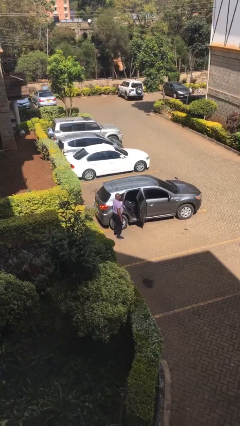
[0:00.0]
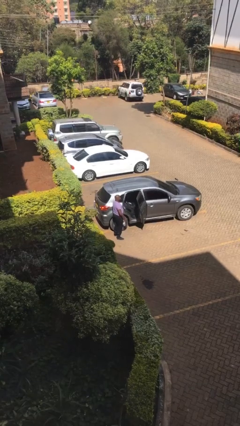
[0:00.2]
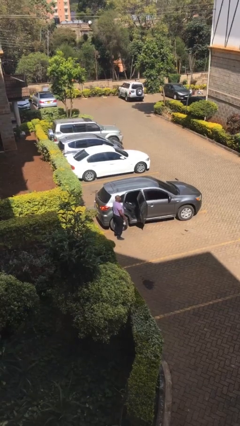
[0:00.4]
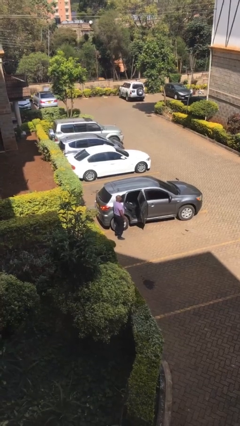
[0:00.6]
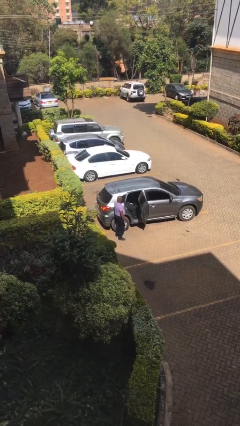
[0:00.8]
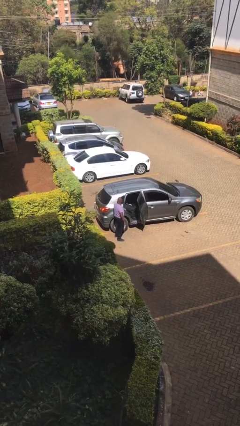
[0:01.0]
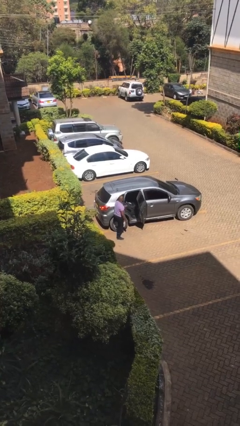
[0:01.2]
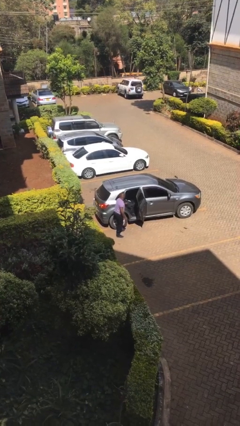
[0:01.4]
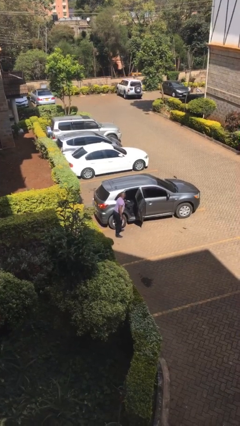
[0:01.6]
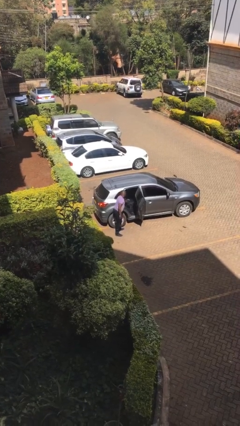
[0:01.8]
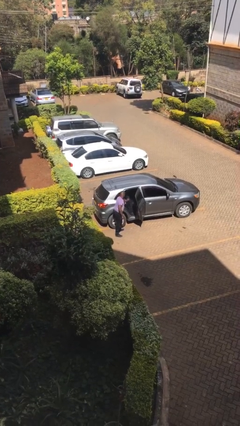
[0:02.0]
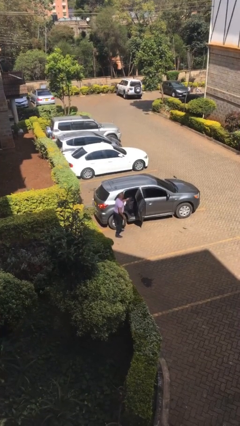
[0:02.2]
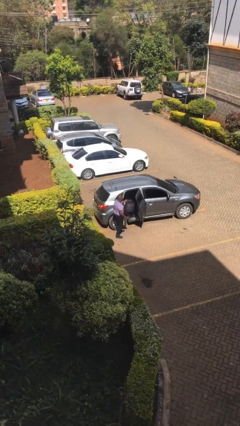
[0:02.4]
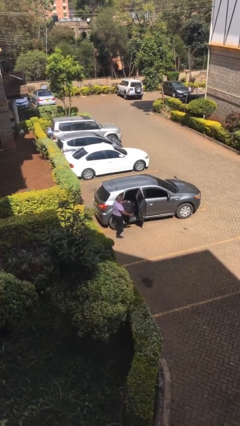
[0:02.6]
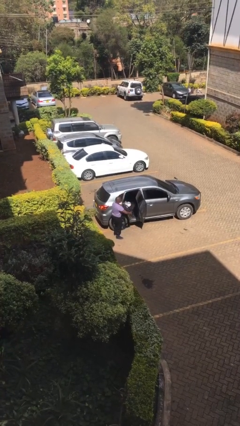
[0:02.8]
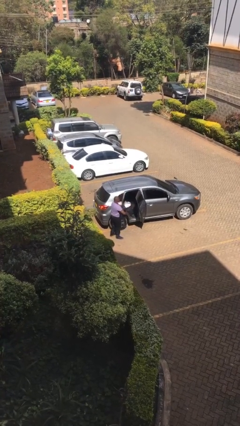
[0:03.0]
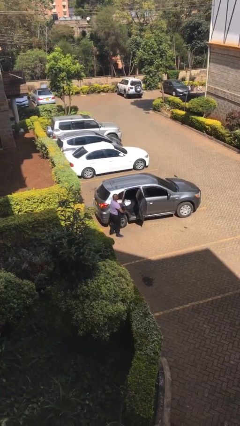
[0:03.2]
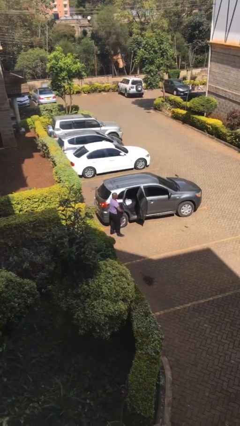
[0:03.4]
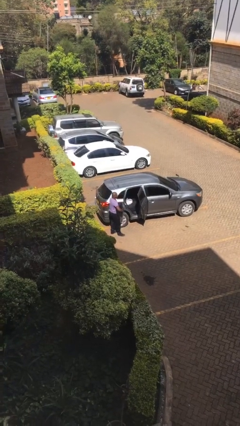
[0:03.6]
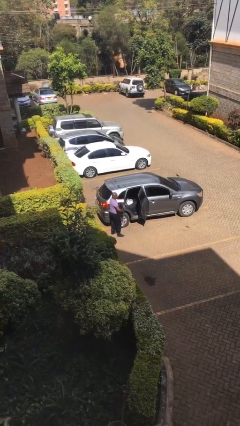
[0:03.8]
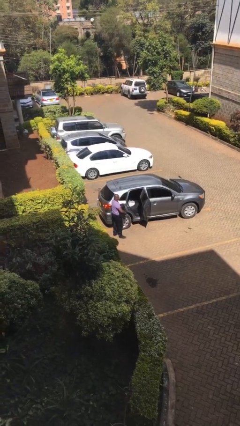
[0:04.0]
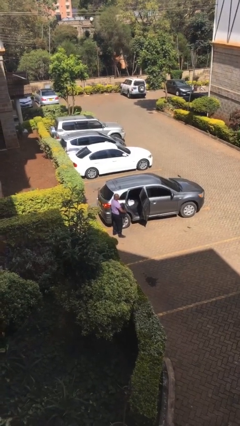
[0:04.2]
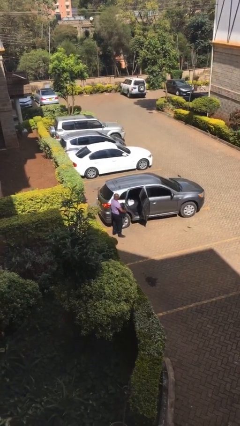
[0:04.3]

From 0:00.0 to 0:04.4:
person unloads car

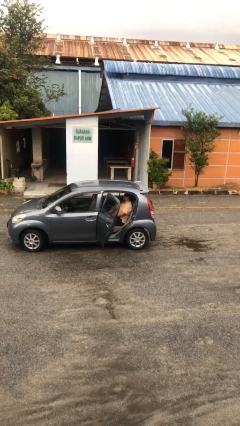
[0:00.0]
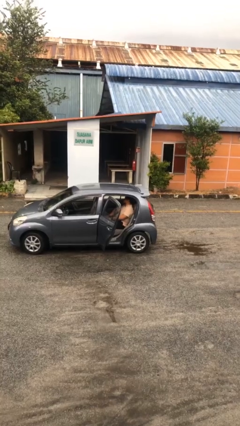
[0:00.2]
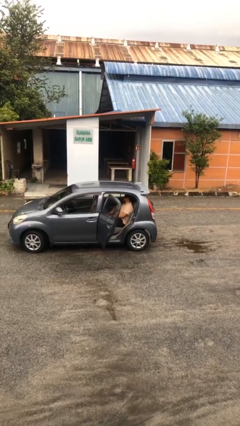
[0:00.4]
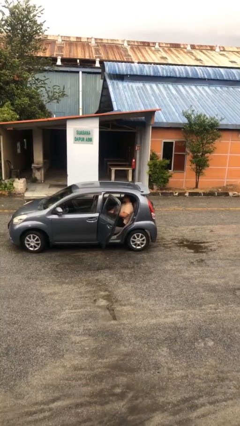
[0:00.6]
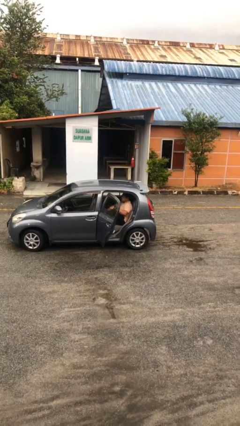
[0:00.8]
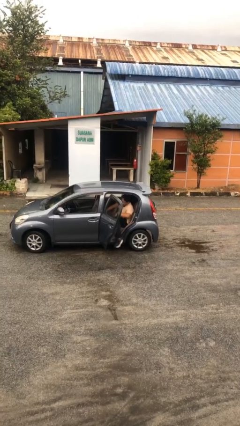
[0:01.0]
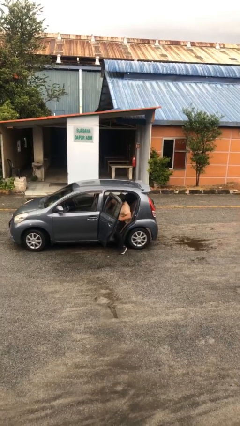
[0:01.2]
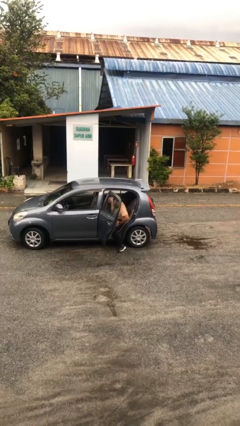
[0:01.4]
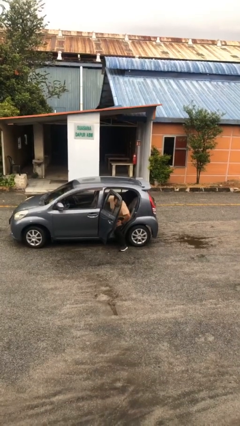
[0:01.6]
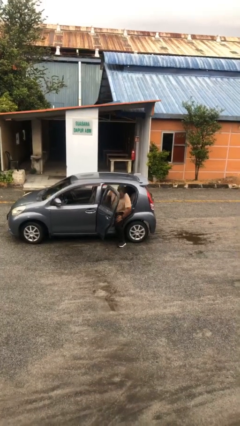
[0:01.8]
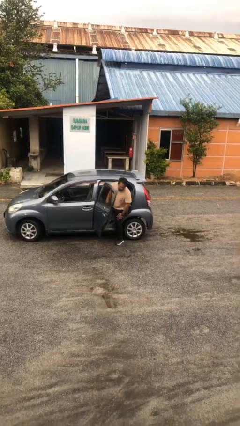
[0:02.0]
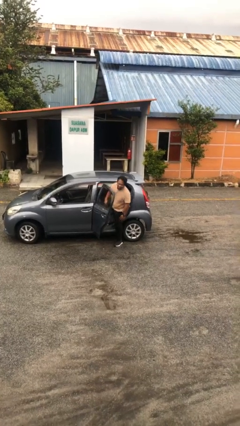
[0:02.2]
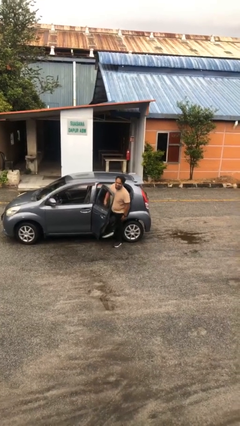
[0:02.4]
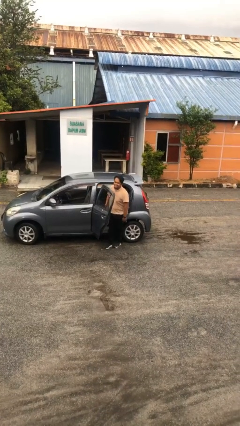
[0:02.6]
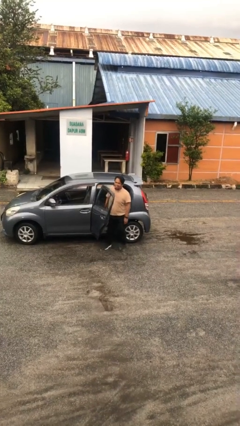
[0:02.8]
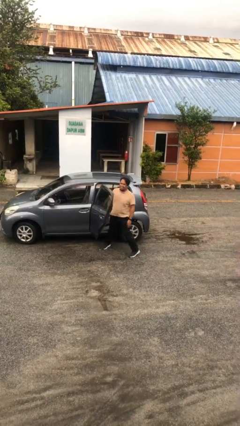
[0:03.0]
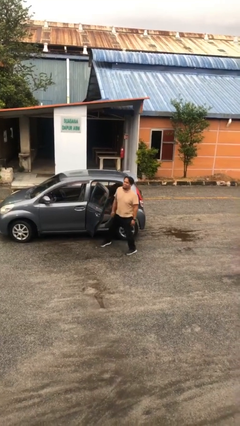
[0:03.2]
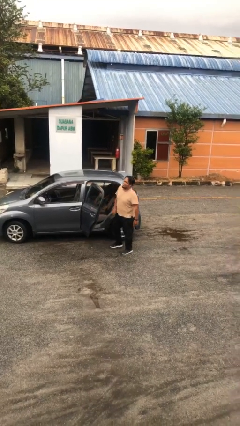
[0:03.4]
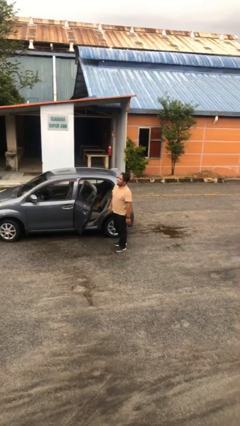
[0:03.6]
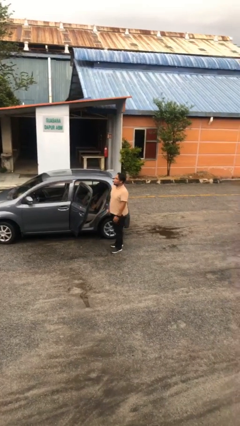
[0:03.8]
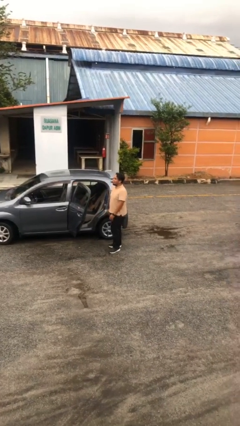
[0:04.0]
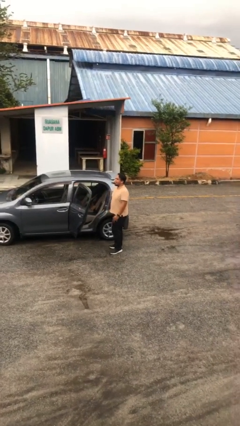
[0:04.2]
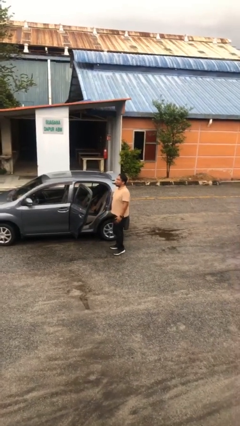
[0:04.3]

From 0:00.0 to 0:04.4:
person exits car

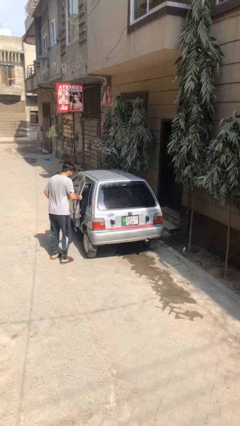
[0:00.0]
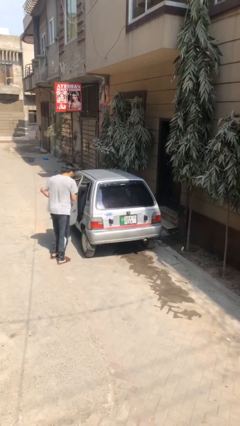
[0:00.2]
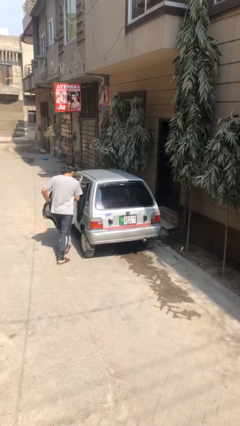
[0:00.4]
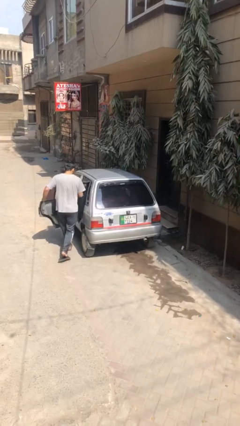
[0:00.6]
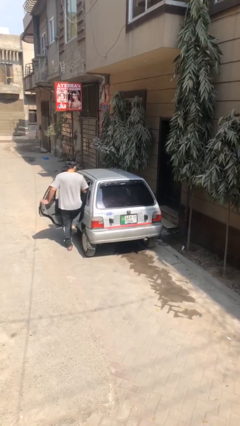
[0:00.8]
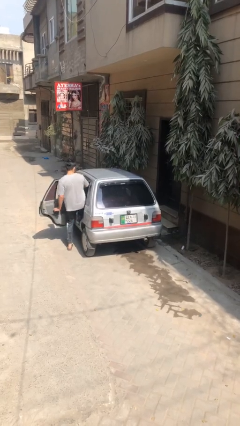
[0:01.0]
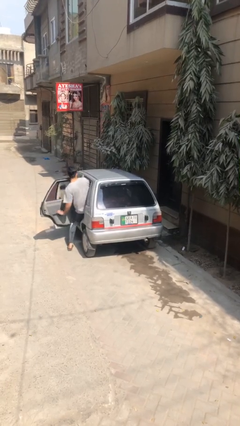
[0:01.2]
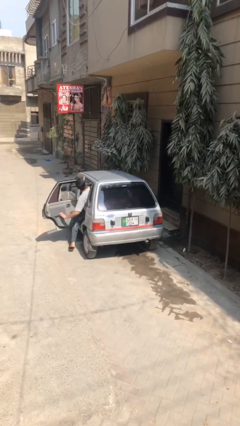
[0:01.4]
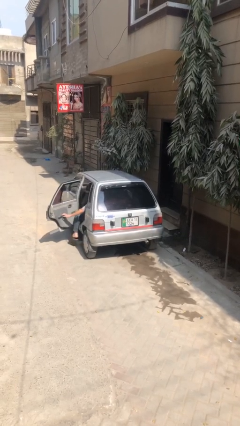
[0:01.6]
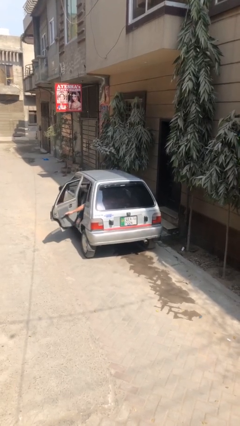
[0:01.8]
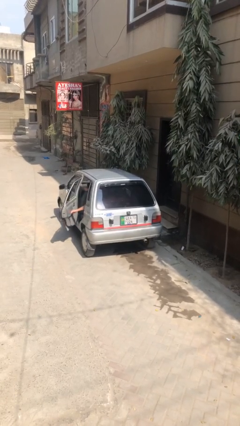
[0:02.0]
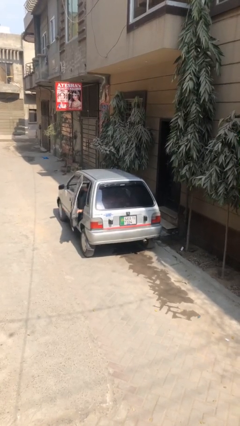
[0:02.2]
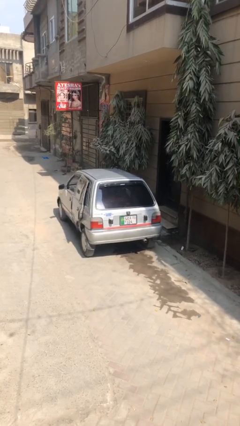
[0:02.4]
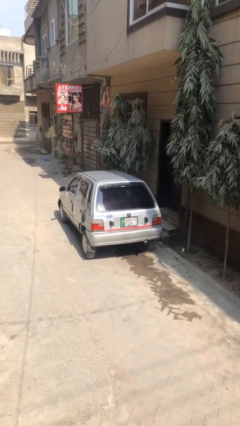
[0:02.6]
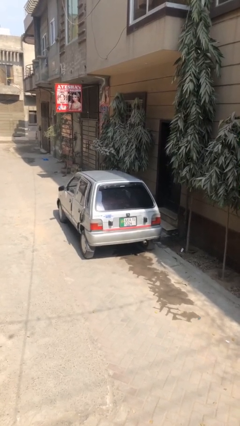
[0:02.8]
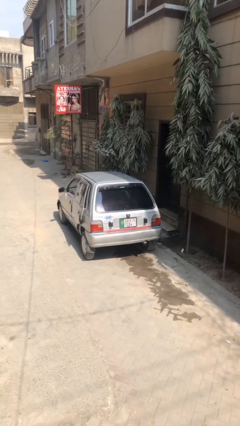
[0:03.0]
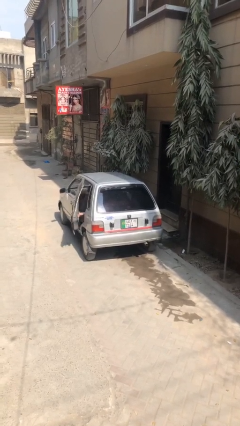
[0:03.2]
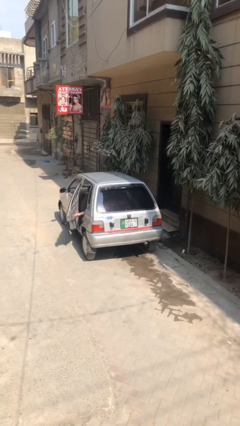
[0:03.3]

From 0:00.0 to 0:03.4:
car picks up person

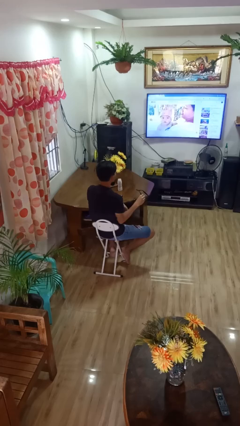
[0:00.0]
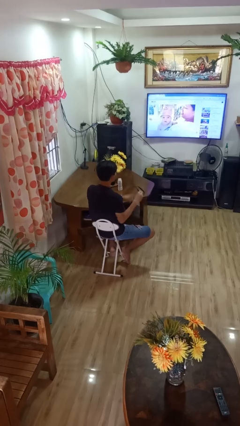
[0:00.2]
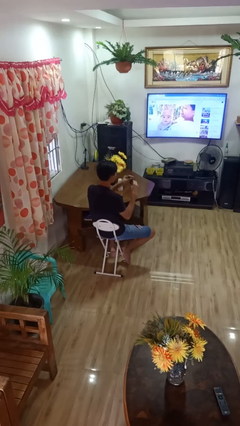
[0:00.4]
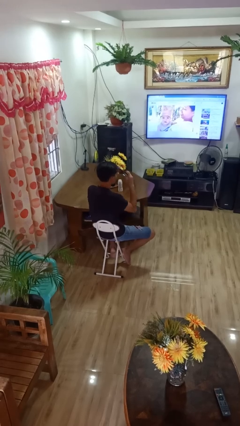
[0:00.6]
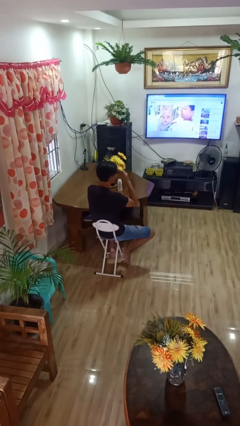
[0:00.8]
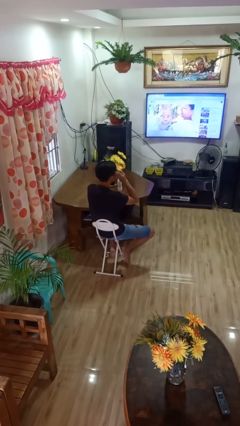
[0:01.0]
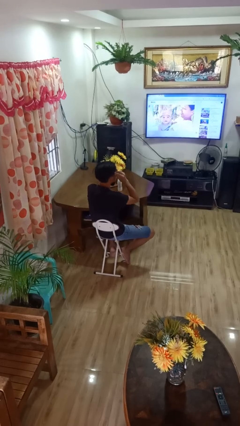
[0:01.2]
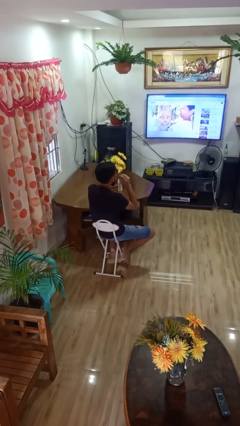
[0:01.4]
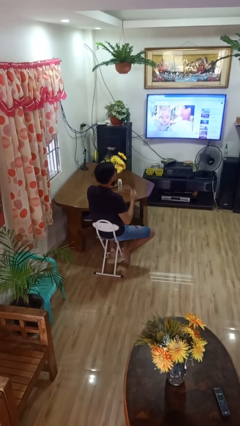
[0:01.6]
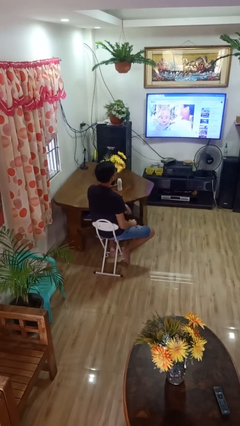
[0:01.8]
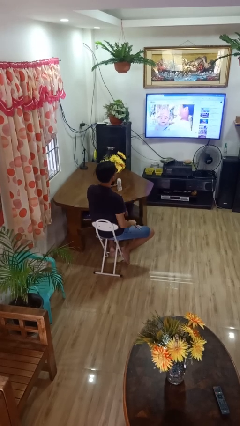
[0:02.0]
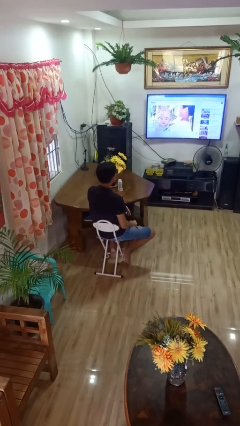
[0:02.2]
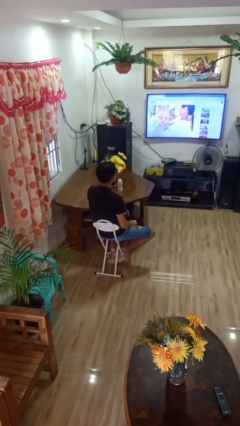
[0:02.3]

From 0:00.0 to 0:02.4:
person puts on sunglasses

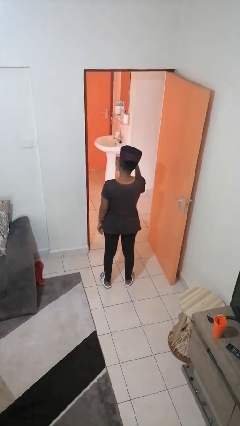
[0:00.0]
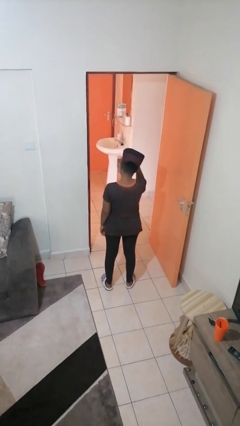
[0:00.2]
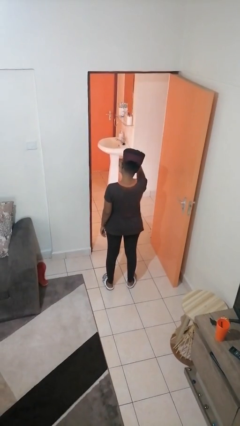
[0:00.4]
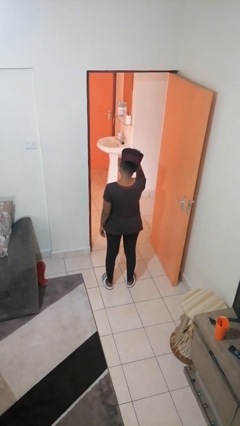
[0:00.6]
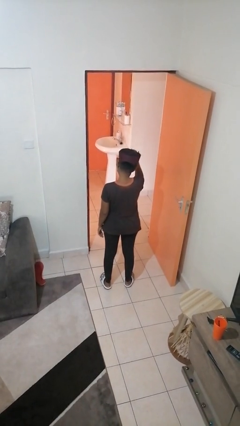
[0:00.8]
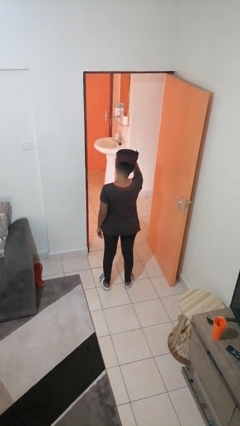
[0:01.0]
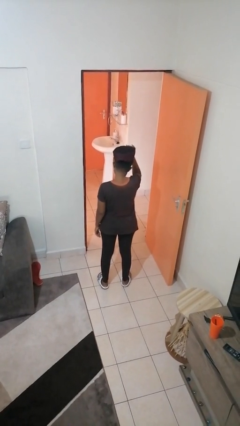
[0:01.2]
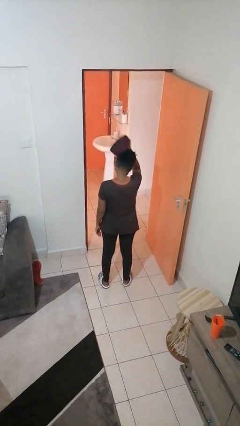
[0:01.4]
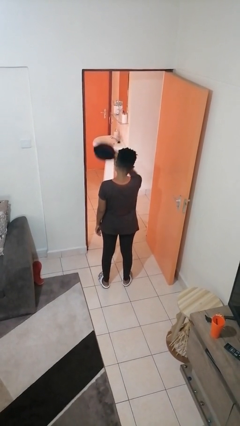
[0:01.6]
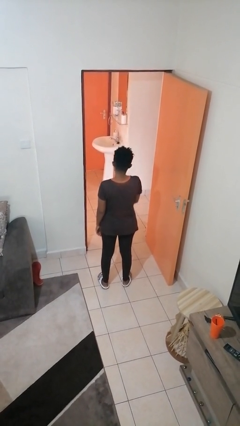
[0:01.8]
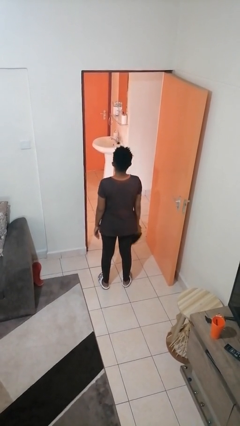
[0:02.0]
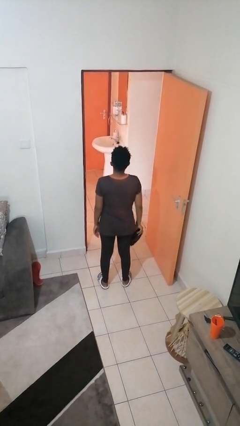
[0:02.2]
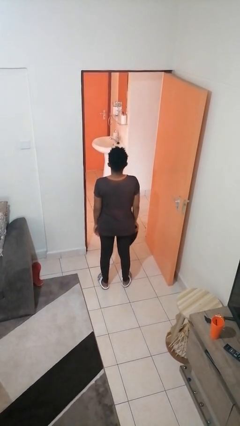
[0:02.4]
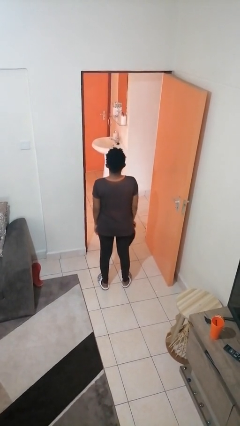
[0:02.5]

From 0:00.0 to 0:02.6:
person takes off hat
